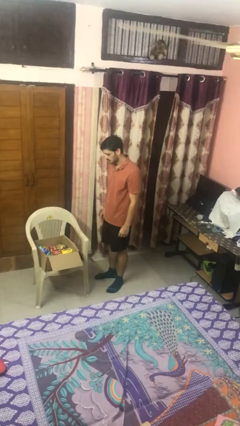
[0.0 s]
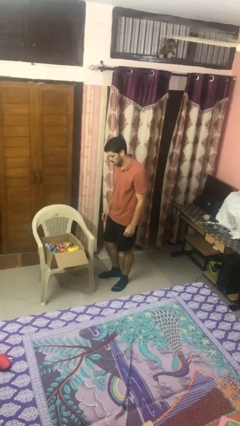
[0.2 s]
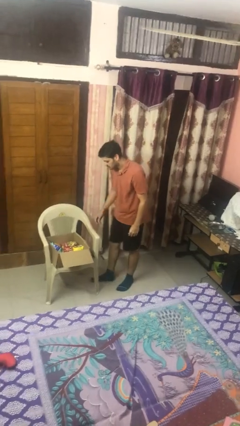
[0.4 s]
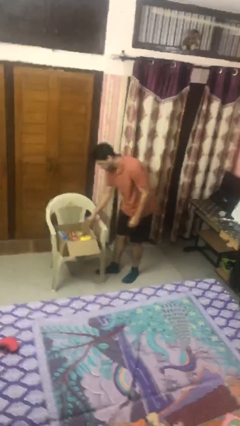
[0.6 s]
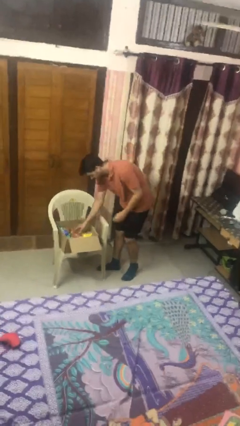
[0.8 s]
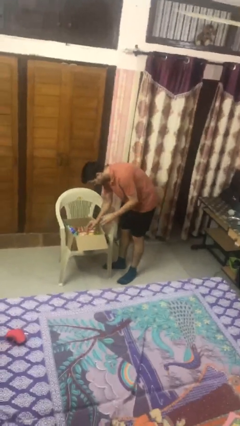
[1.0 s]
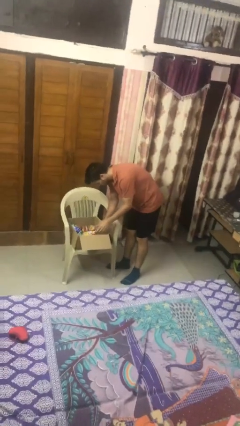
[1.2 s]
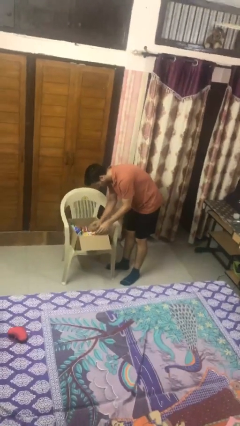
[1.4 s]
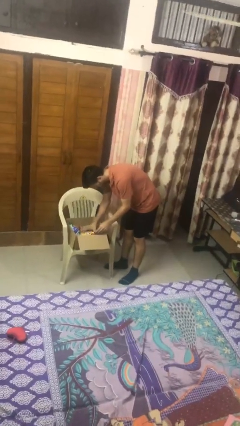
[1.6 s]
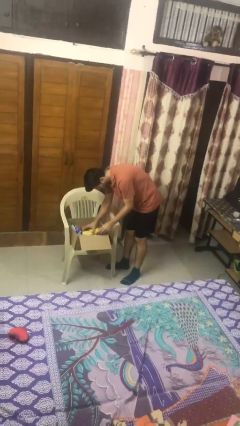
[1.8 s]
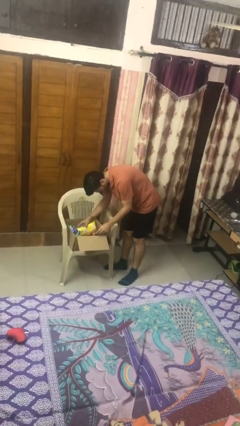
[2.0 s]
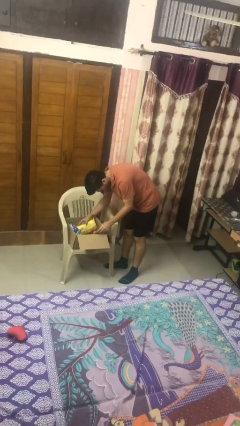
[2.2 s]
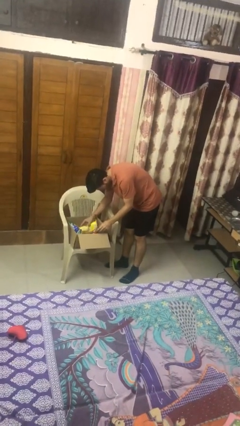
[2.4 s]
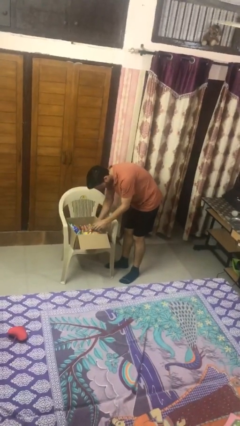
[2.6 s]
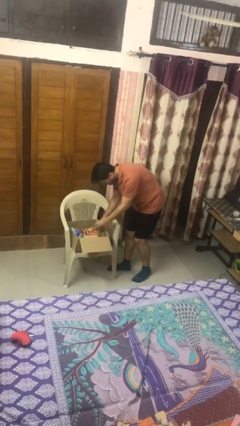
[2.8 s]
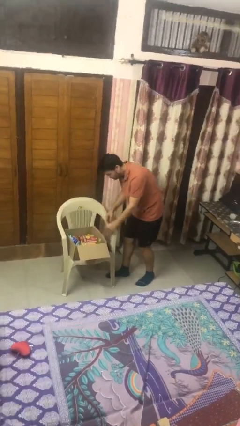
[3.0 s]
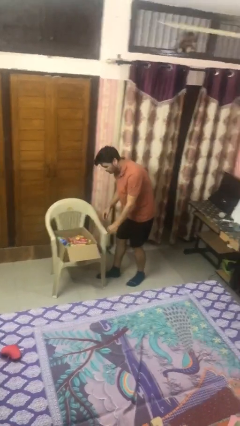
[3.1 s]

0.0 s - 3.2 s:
person searches in box

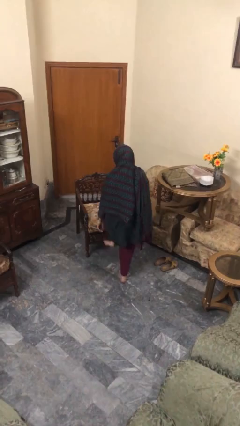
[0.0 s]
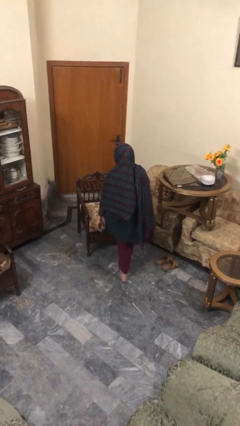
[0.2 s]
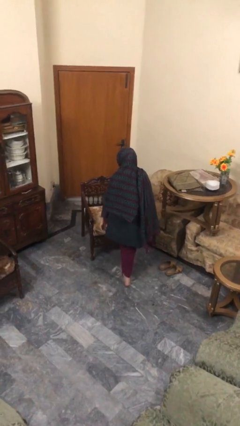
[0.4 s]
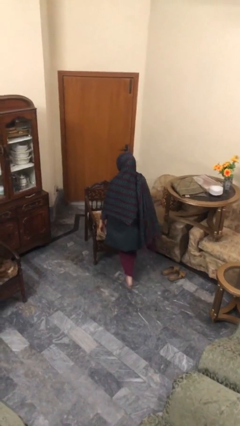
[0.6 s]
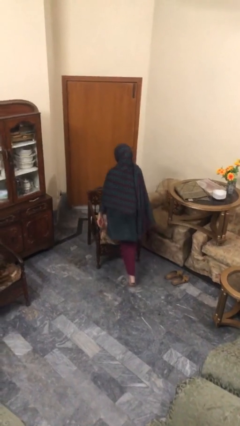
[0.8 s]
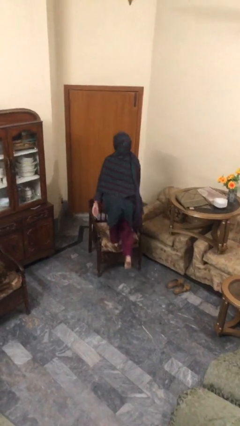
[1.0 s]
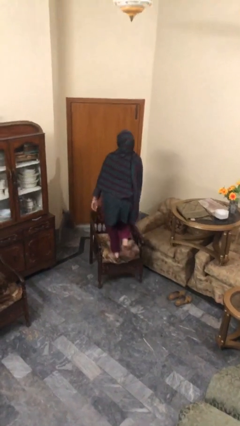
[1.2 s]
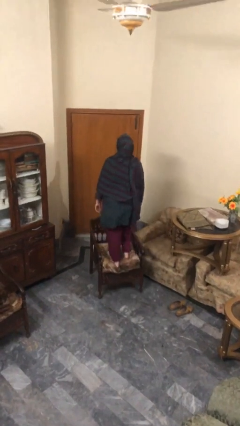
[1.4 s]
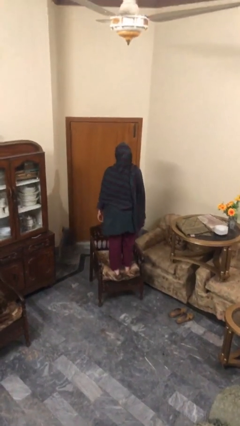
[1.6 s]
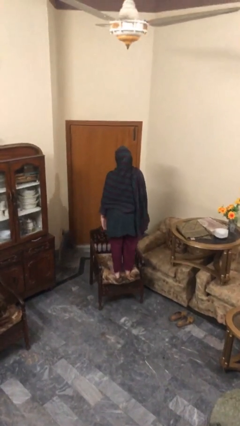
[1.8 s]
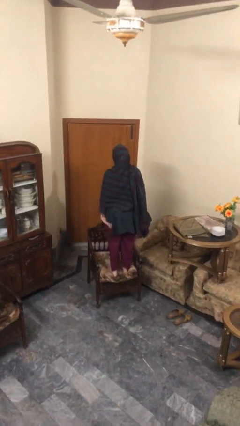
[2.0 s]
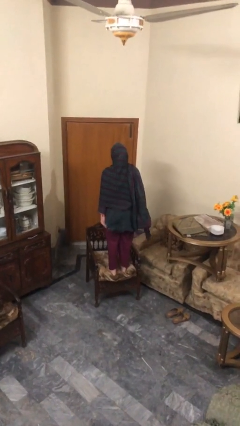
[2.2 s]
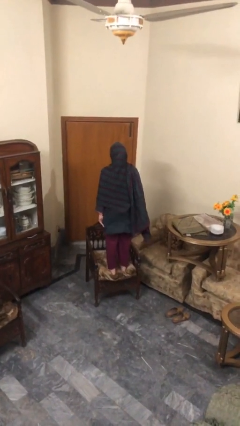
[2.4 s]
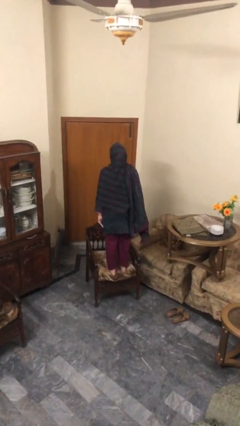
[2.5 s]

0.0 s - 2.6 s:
person climbs on chair

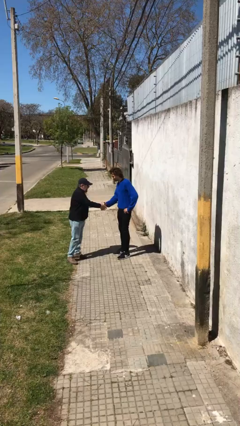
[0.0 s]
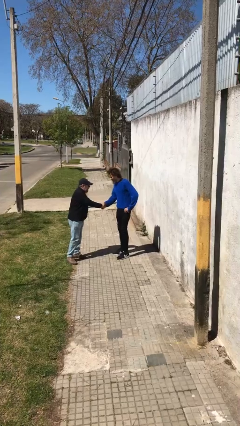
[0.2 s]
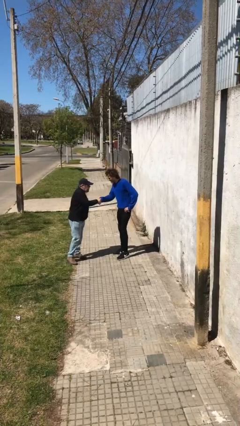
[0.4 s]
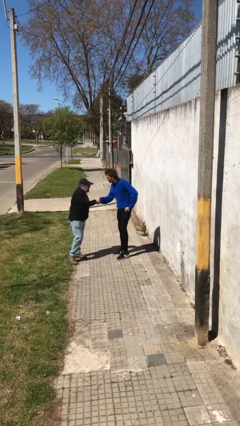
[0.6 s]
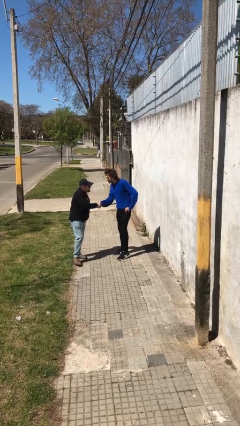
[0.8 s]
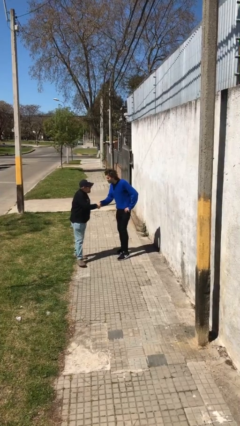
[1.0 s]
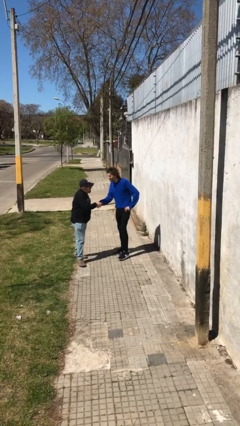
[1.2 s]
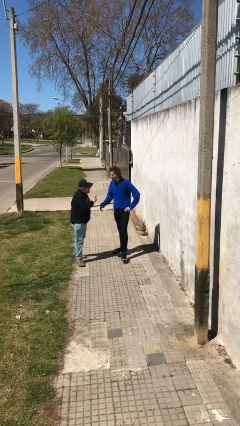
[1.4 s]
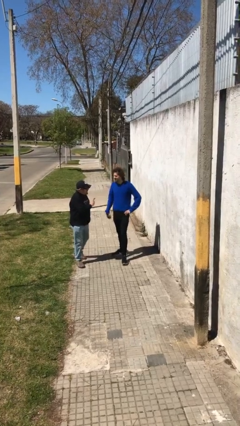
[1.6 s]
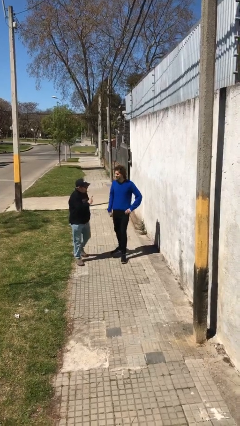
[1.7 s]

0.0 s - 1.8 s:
person shakes hand

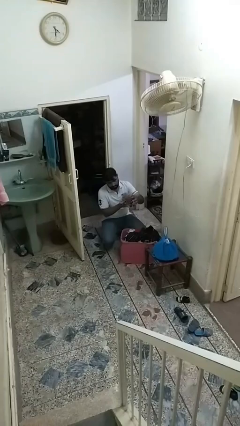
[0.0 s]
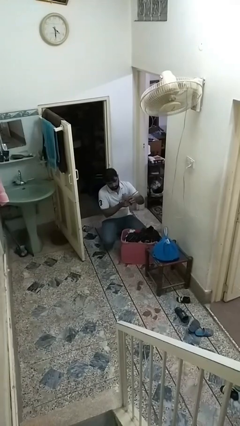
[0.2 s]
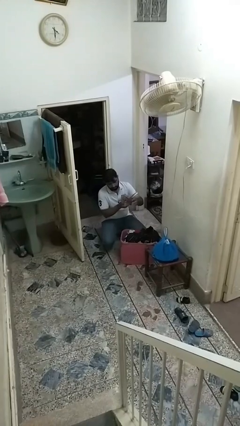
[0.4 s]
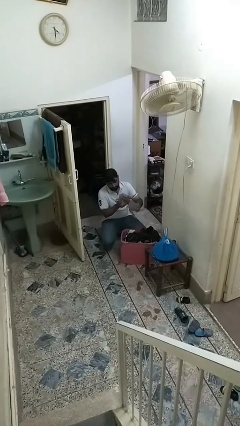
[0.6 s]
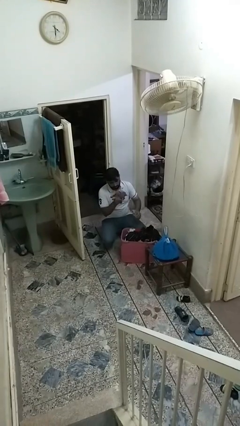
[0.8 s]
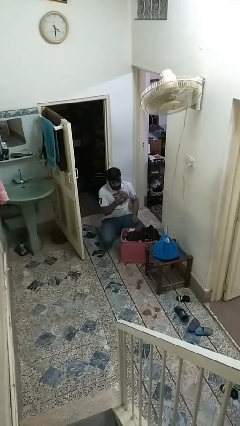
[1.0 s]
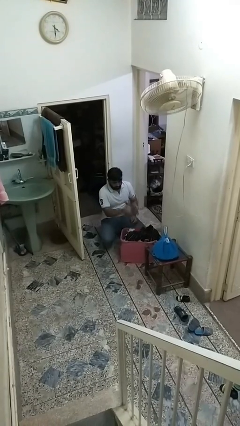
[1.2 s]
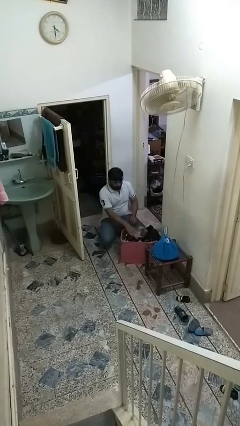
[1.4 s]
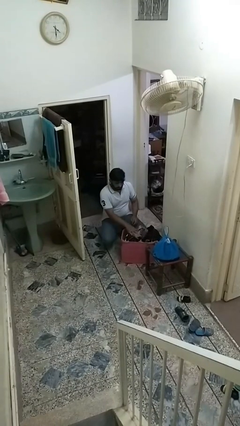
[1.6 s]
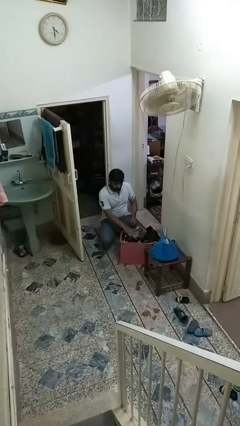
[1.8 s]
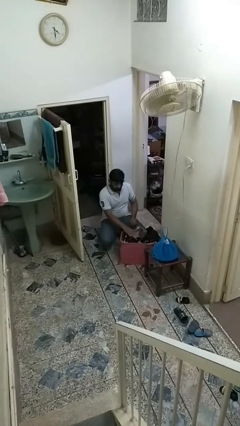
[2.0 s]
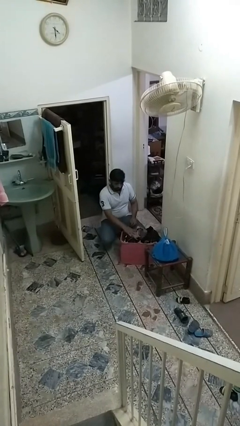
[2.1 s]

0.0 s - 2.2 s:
person puts object into basket

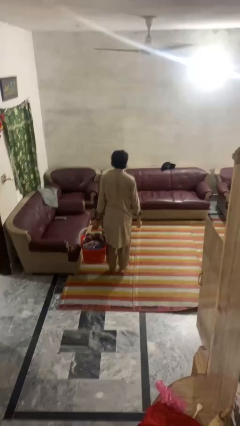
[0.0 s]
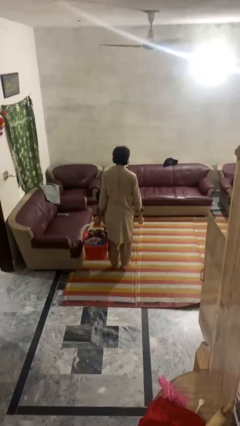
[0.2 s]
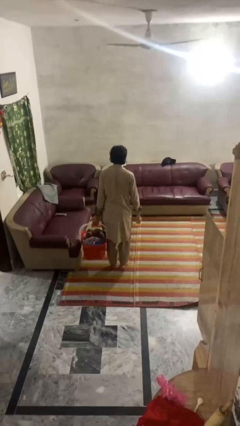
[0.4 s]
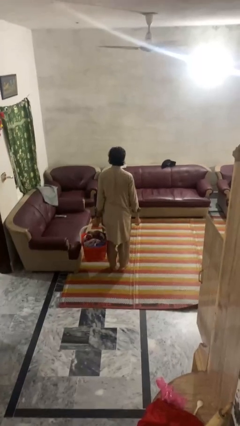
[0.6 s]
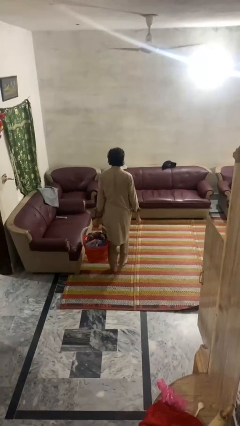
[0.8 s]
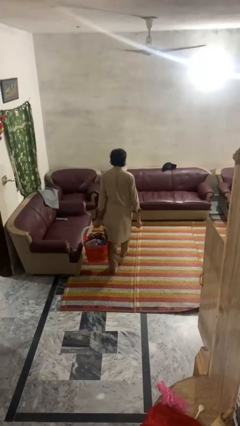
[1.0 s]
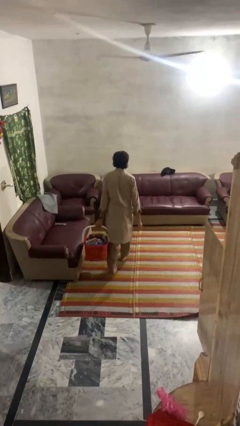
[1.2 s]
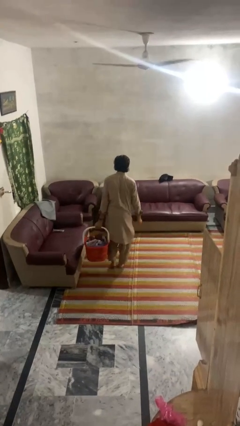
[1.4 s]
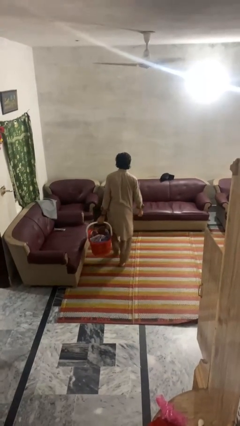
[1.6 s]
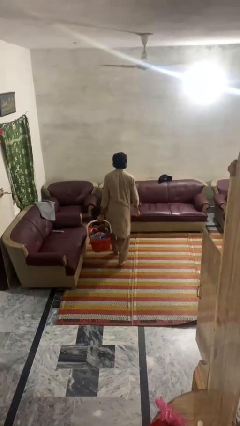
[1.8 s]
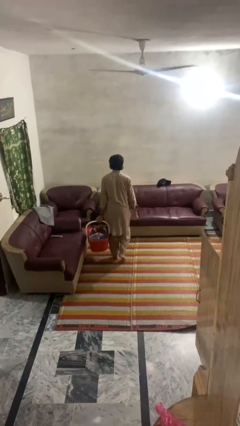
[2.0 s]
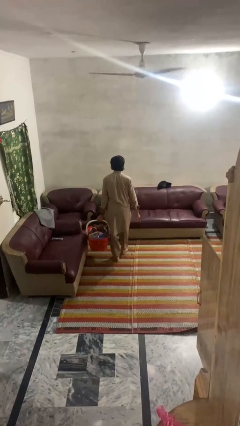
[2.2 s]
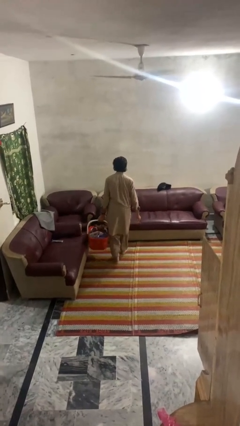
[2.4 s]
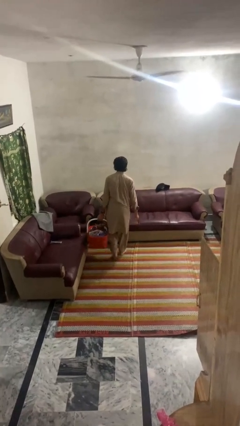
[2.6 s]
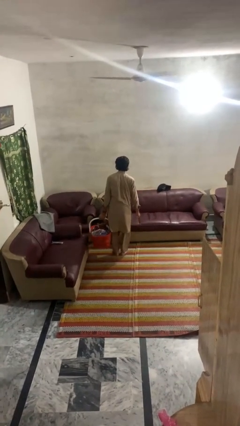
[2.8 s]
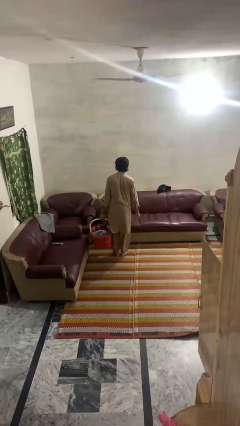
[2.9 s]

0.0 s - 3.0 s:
person carries laundry basket

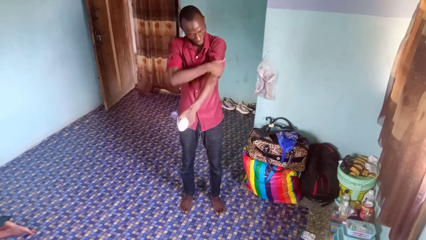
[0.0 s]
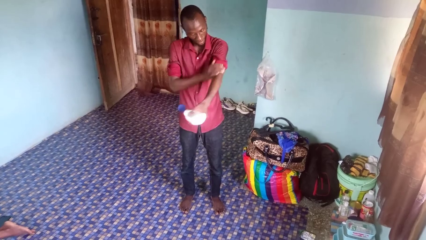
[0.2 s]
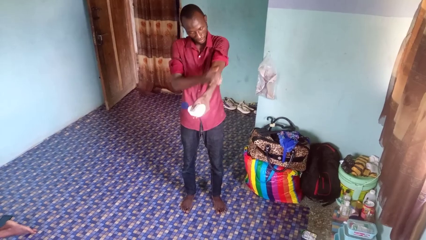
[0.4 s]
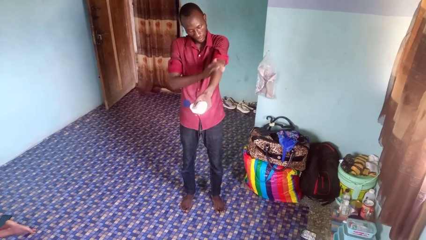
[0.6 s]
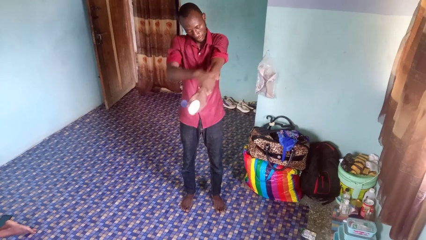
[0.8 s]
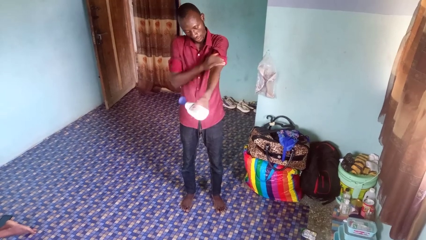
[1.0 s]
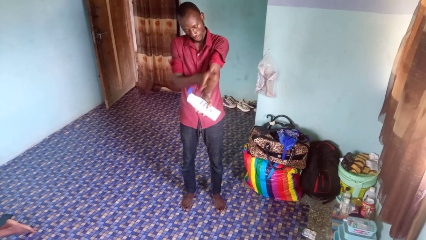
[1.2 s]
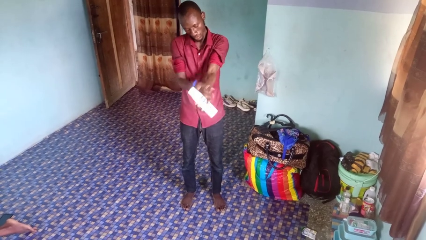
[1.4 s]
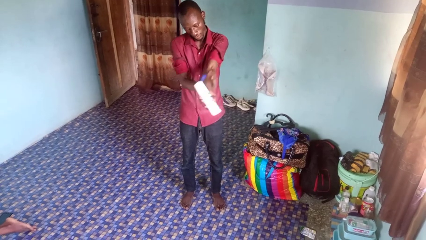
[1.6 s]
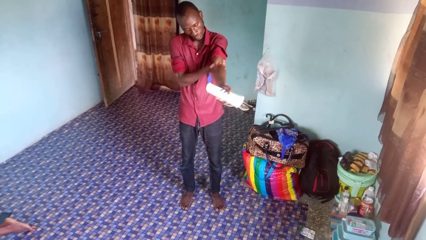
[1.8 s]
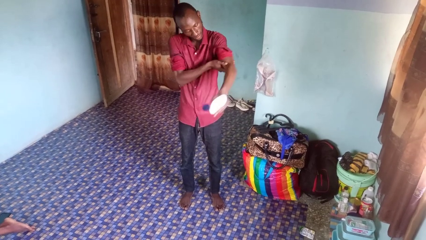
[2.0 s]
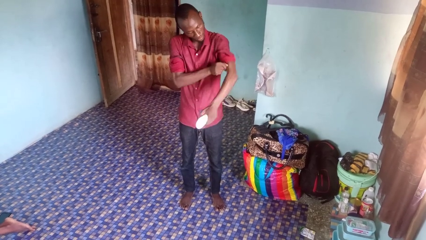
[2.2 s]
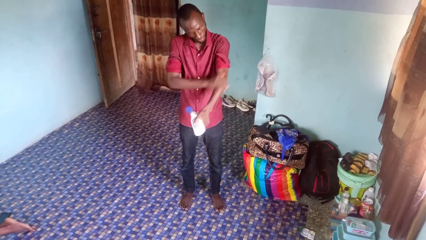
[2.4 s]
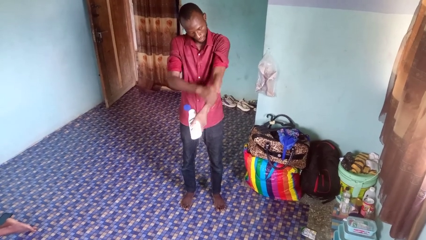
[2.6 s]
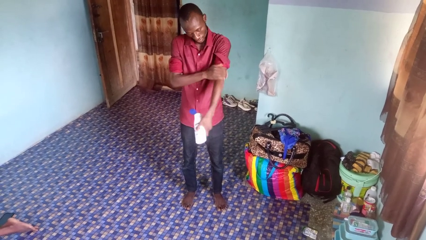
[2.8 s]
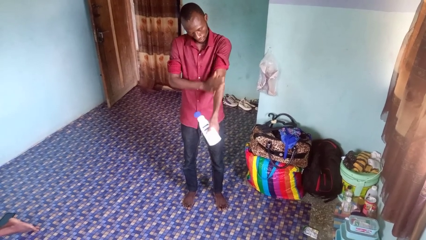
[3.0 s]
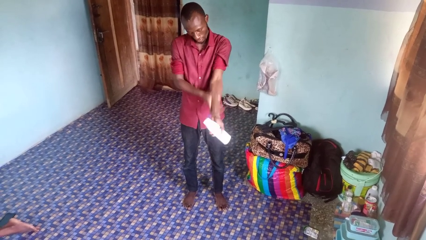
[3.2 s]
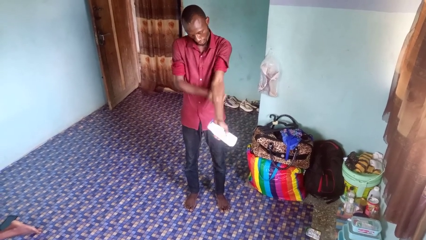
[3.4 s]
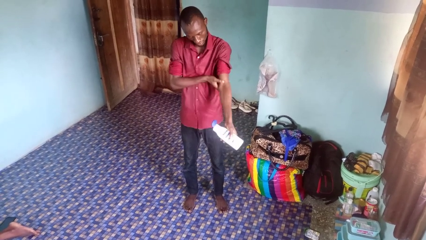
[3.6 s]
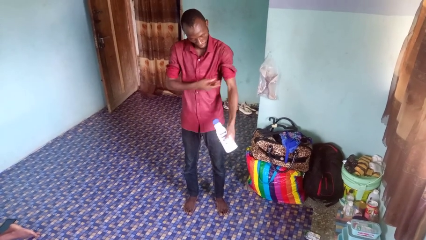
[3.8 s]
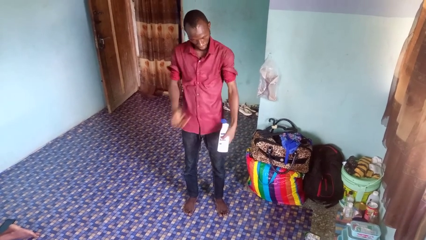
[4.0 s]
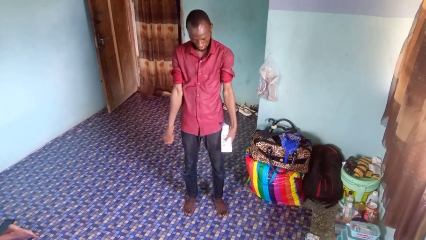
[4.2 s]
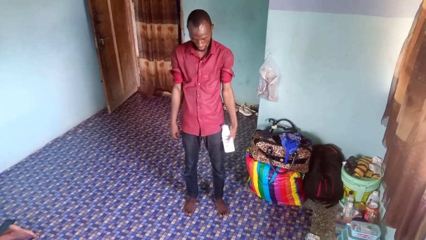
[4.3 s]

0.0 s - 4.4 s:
person applies sunscreen

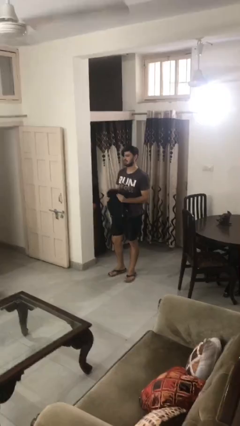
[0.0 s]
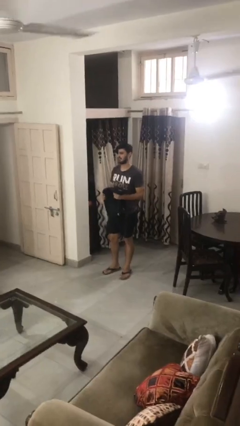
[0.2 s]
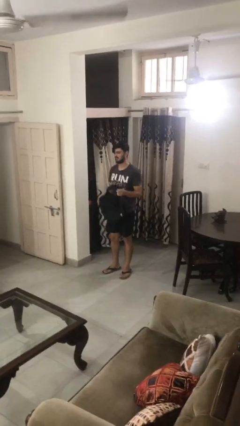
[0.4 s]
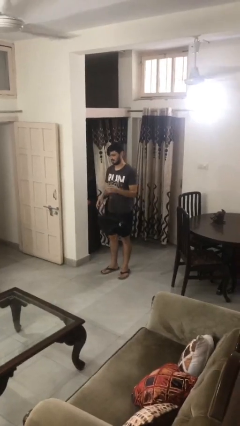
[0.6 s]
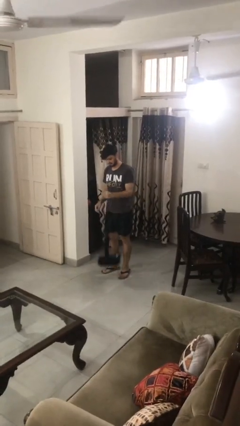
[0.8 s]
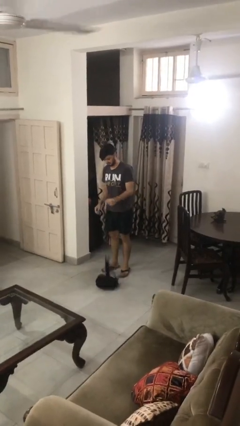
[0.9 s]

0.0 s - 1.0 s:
person drops object
